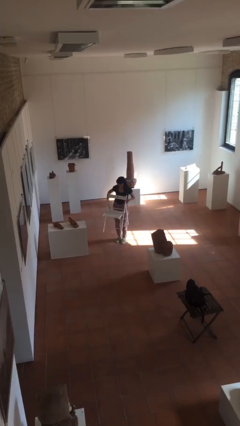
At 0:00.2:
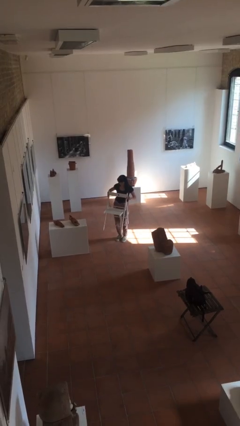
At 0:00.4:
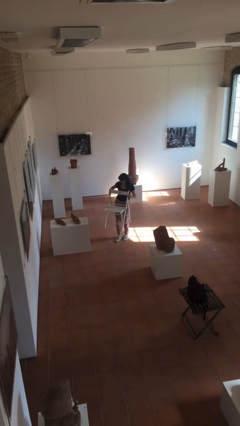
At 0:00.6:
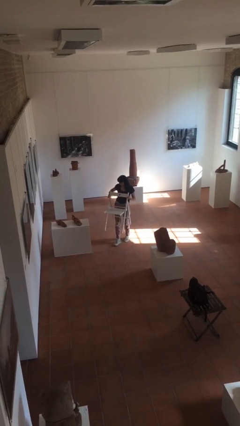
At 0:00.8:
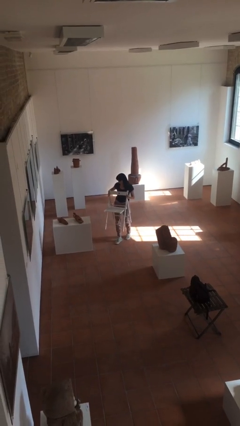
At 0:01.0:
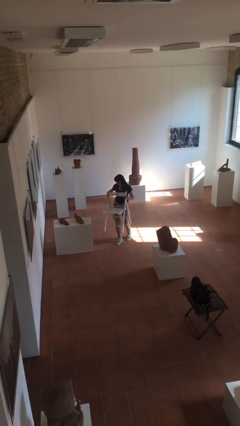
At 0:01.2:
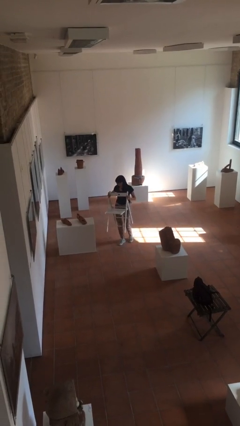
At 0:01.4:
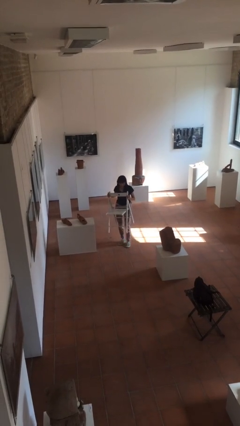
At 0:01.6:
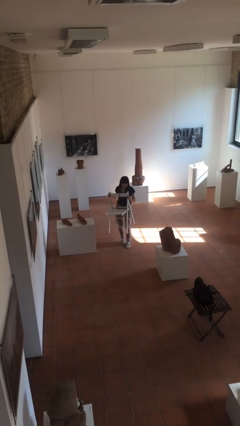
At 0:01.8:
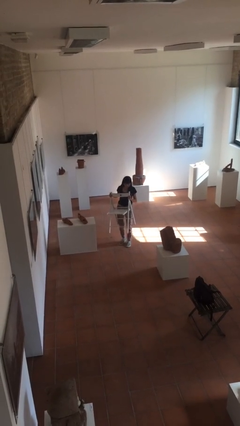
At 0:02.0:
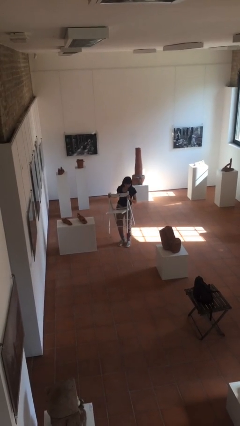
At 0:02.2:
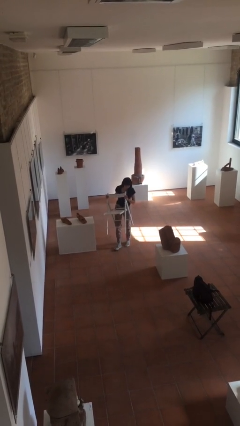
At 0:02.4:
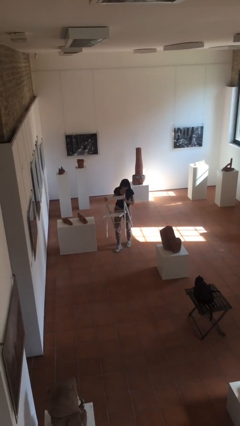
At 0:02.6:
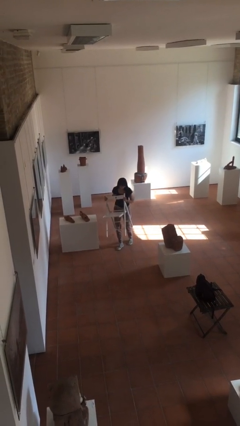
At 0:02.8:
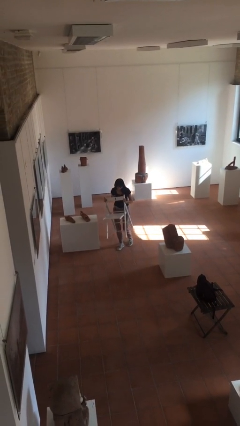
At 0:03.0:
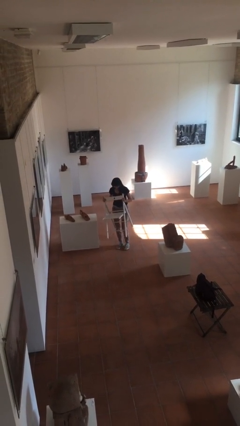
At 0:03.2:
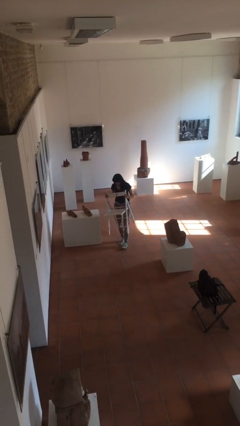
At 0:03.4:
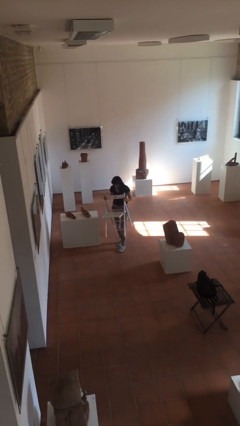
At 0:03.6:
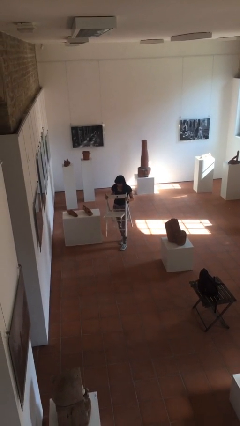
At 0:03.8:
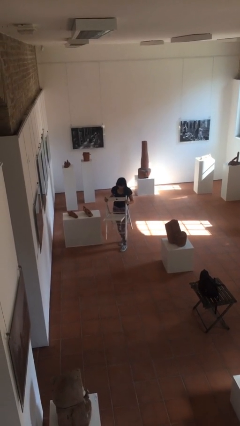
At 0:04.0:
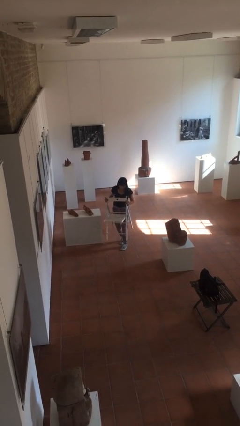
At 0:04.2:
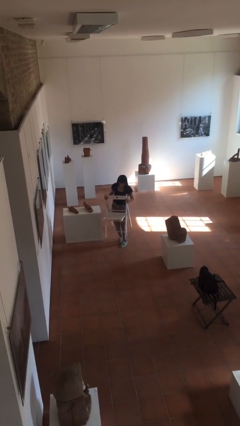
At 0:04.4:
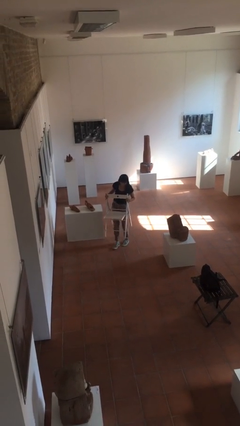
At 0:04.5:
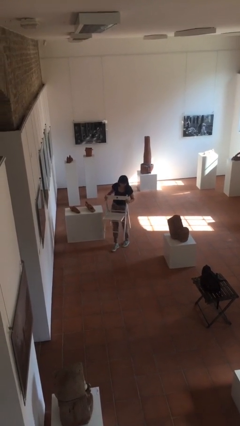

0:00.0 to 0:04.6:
person carries heavy object

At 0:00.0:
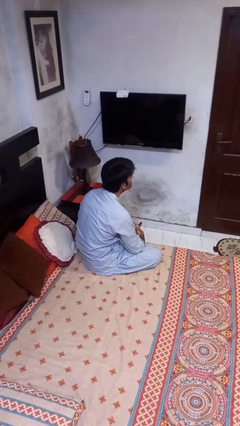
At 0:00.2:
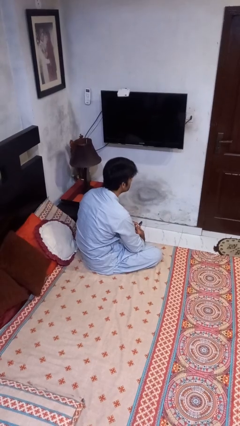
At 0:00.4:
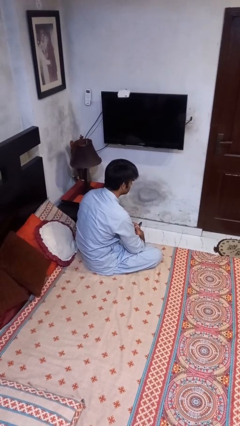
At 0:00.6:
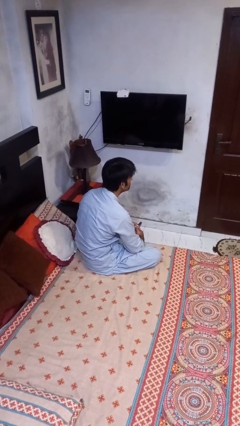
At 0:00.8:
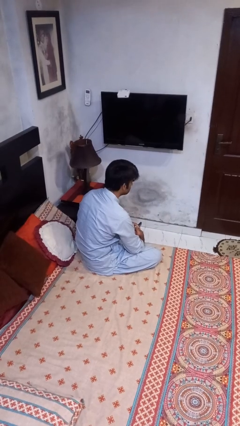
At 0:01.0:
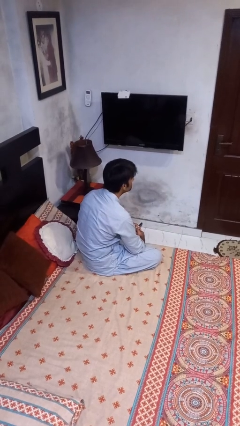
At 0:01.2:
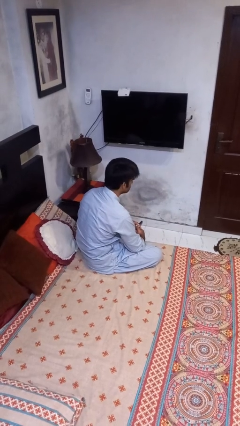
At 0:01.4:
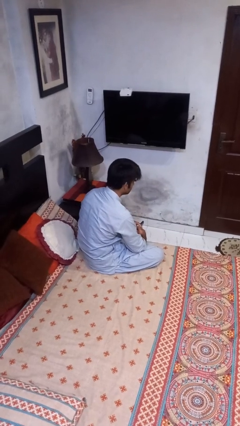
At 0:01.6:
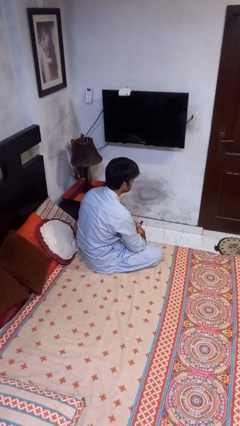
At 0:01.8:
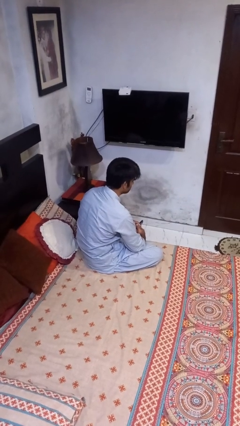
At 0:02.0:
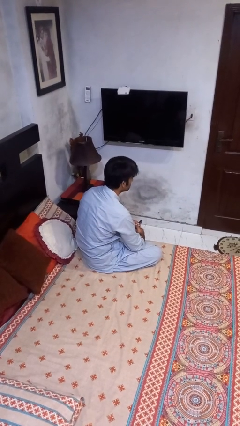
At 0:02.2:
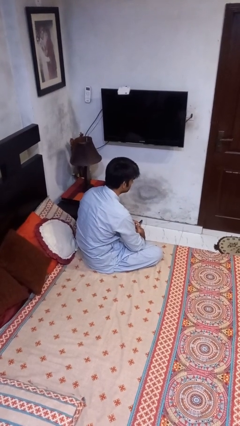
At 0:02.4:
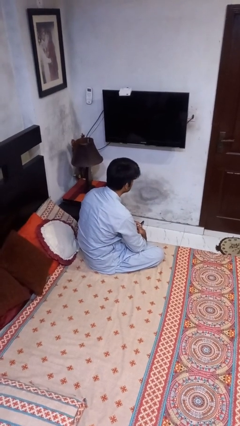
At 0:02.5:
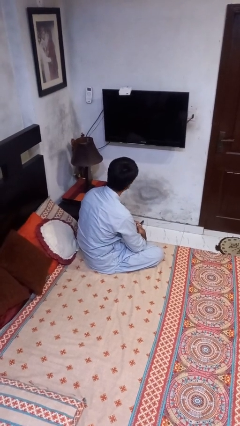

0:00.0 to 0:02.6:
person nods head

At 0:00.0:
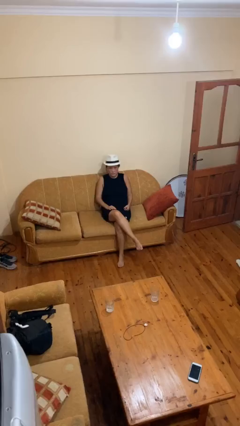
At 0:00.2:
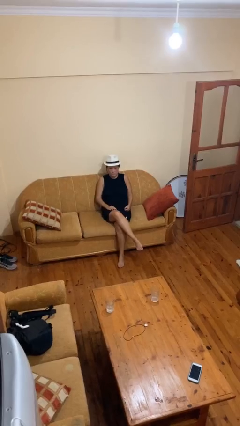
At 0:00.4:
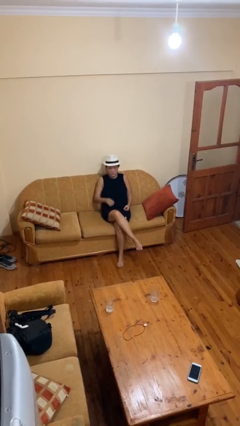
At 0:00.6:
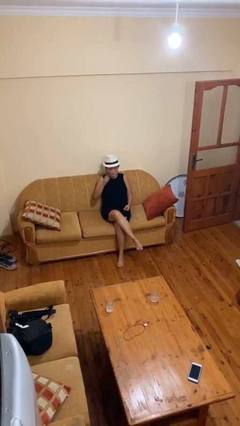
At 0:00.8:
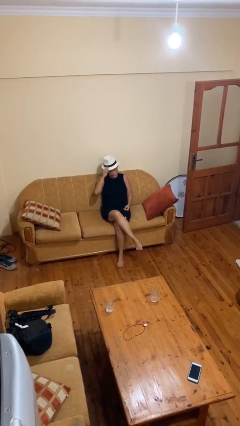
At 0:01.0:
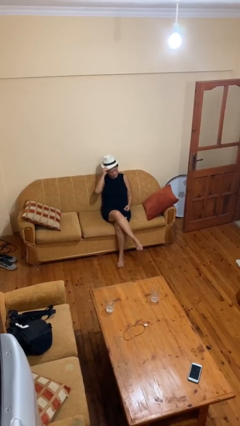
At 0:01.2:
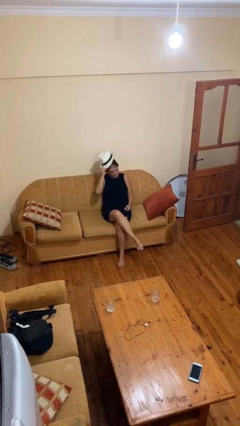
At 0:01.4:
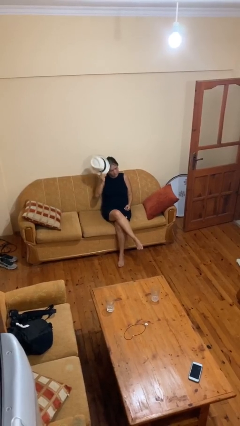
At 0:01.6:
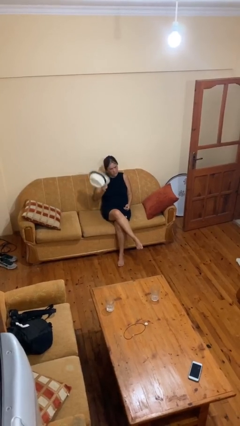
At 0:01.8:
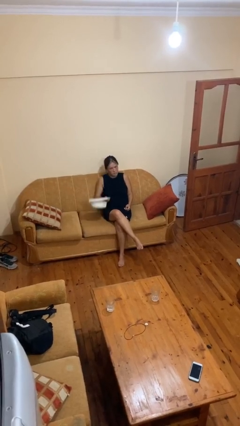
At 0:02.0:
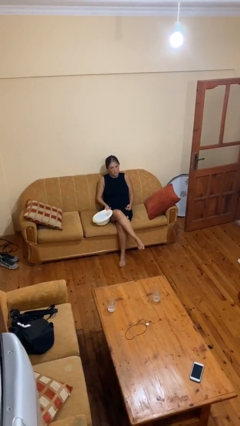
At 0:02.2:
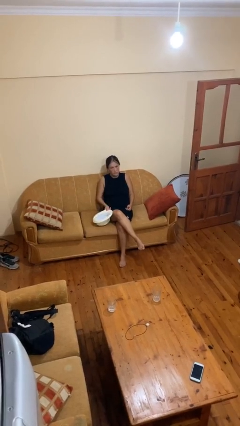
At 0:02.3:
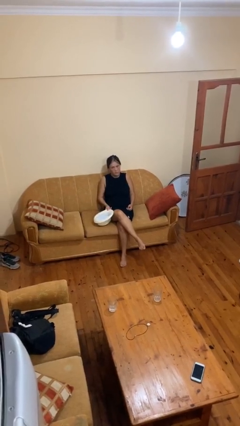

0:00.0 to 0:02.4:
person takes off hat

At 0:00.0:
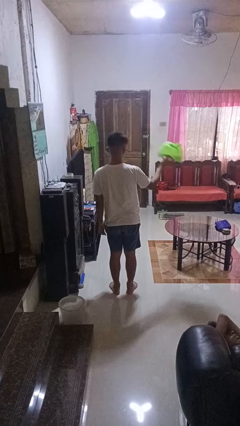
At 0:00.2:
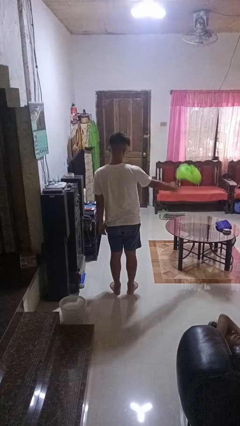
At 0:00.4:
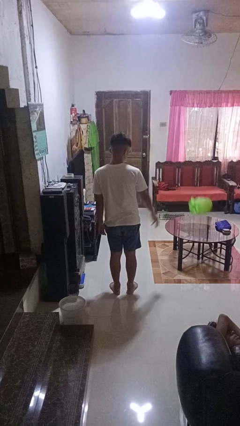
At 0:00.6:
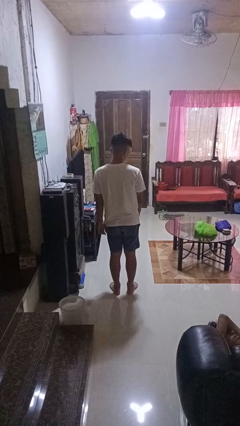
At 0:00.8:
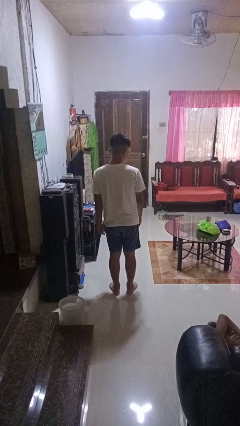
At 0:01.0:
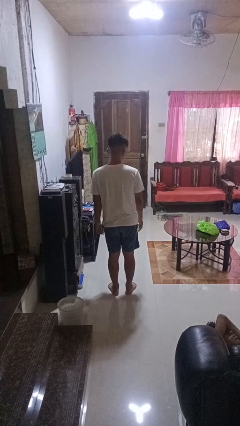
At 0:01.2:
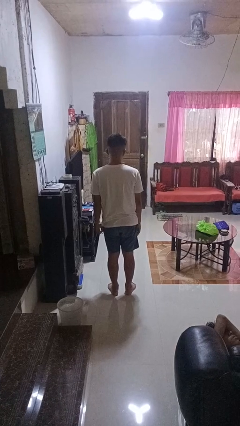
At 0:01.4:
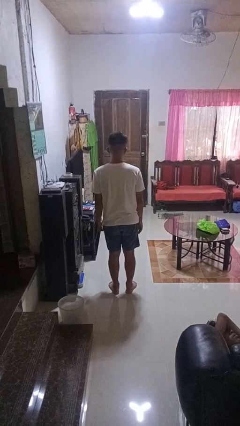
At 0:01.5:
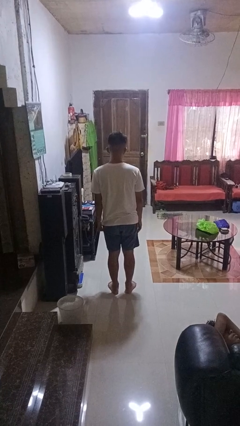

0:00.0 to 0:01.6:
person throws object on table

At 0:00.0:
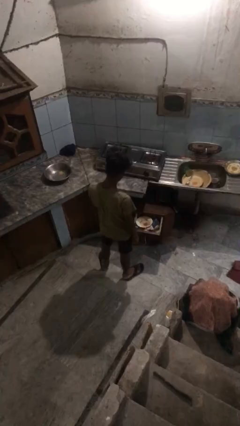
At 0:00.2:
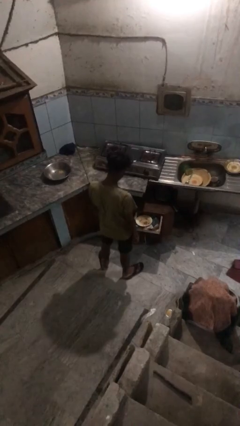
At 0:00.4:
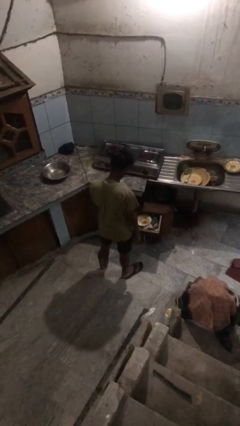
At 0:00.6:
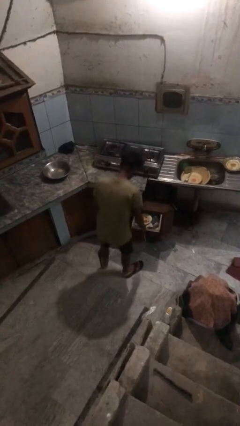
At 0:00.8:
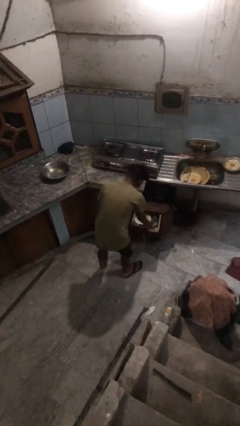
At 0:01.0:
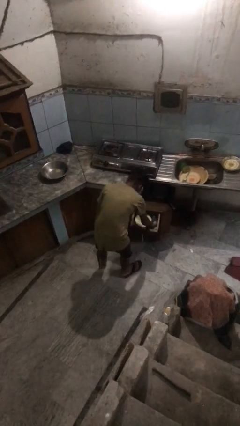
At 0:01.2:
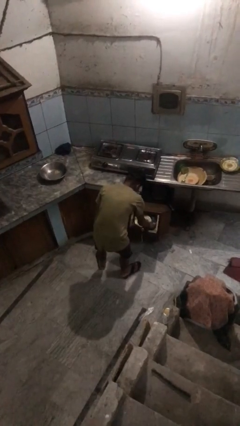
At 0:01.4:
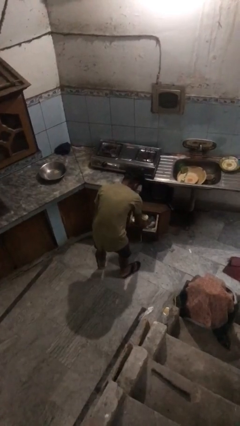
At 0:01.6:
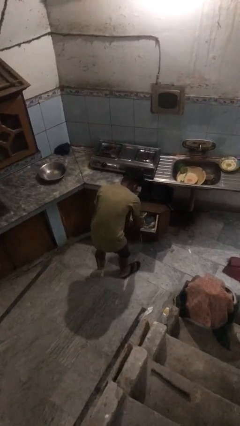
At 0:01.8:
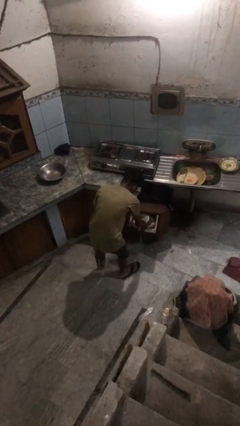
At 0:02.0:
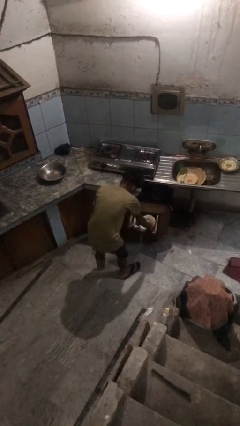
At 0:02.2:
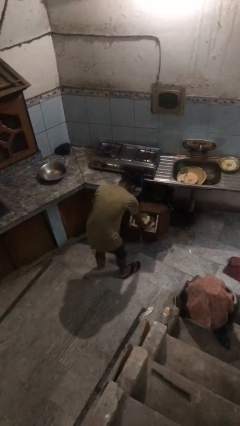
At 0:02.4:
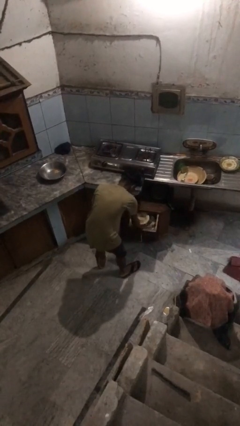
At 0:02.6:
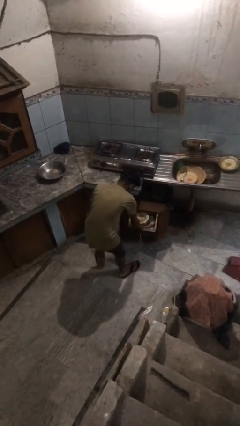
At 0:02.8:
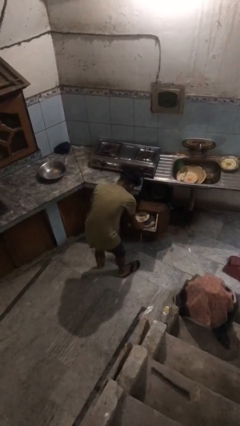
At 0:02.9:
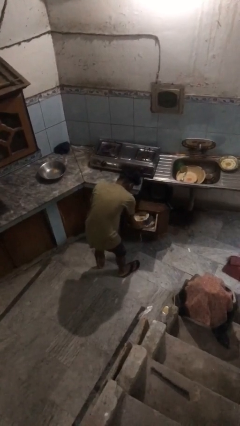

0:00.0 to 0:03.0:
person searches in kitchen drawer

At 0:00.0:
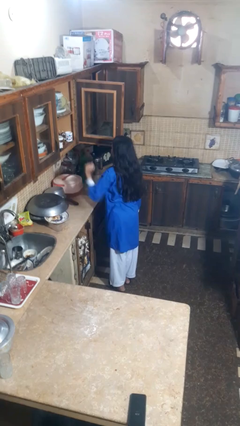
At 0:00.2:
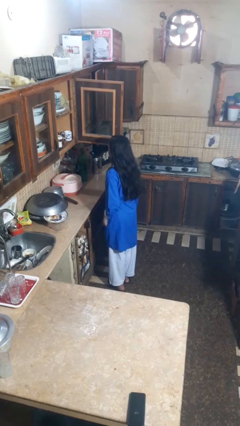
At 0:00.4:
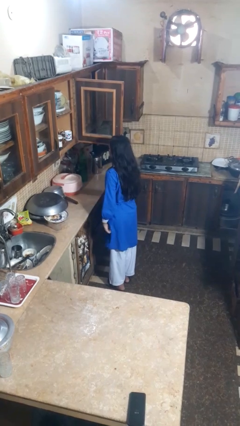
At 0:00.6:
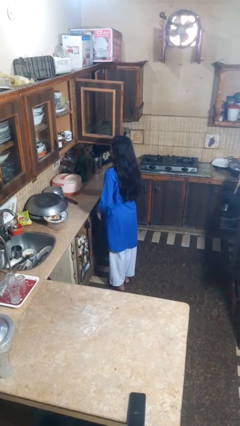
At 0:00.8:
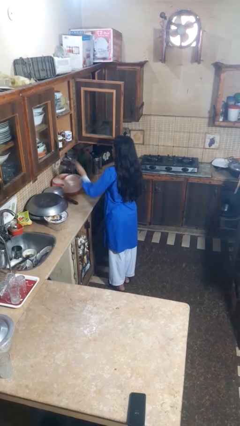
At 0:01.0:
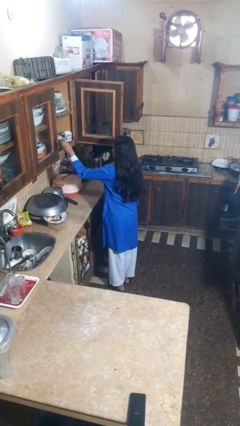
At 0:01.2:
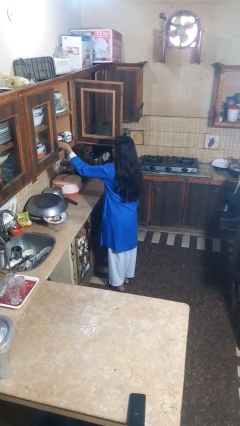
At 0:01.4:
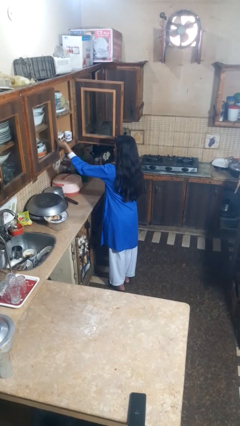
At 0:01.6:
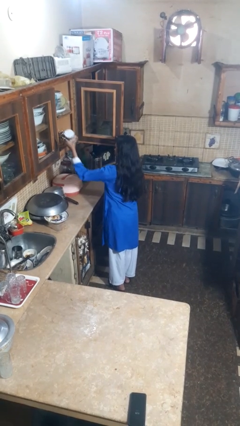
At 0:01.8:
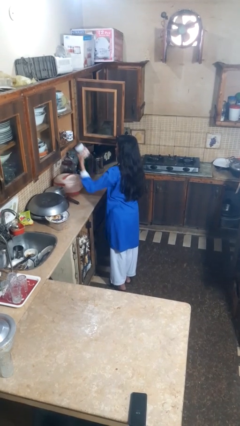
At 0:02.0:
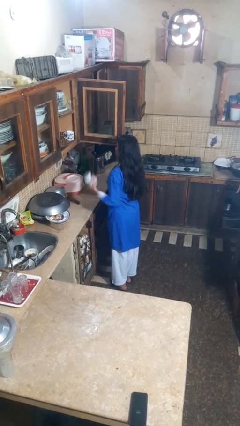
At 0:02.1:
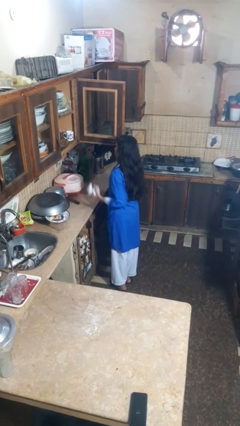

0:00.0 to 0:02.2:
person takes object from cabinet

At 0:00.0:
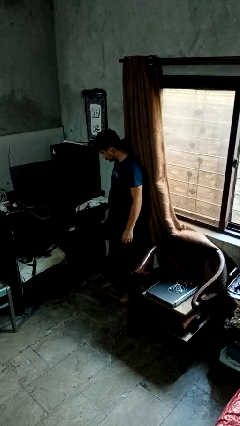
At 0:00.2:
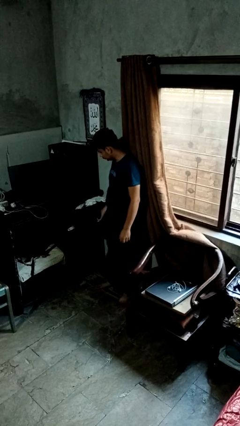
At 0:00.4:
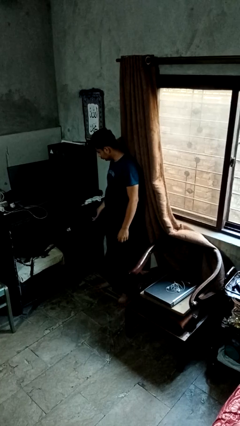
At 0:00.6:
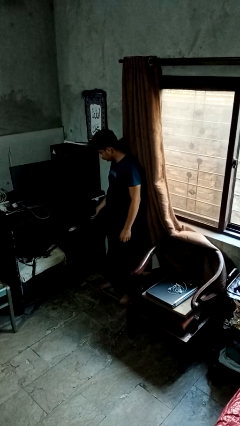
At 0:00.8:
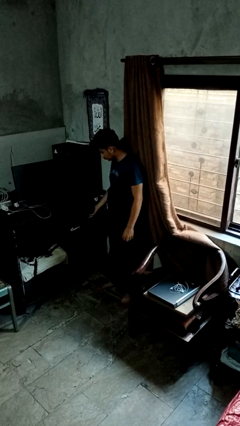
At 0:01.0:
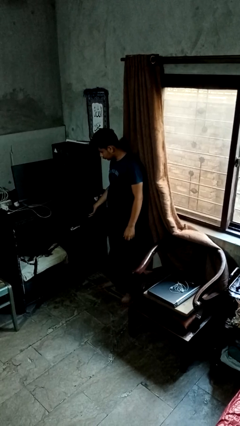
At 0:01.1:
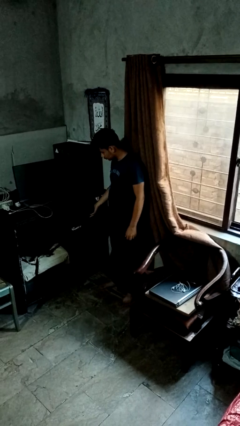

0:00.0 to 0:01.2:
person closes dresser drawer
